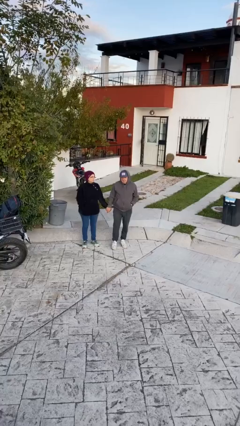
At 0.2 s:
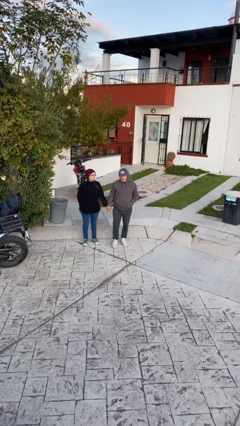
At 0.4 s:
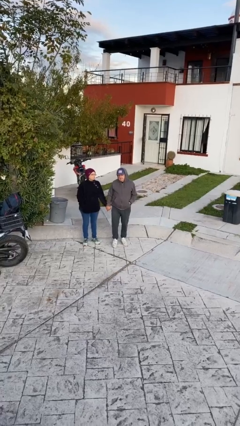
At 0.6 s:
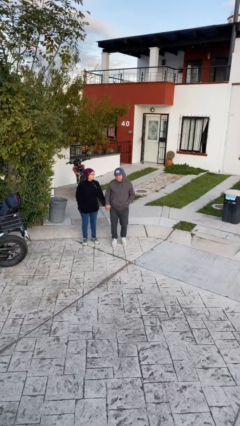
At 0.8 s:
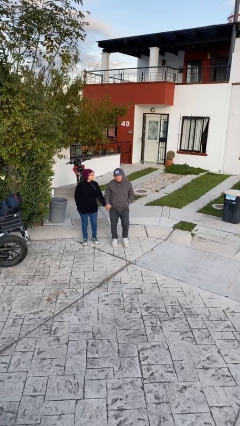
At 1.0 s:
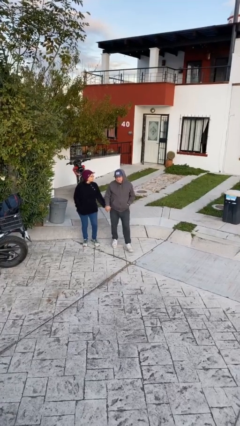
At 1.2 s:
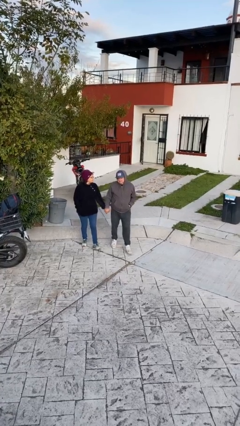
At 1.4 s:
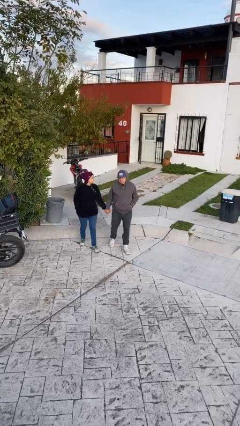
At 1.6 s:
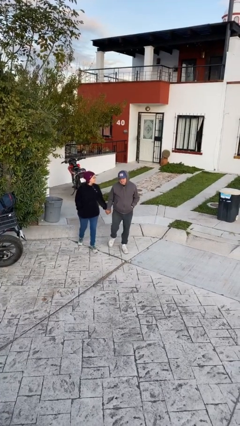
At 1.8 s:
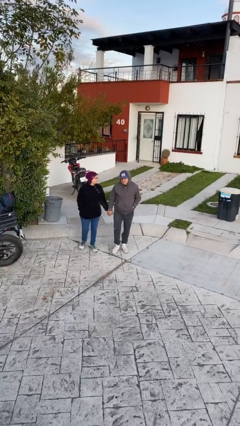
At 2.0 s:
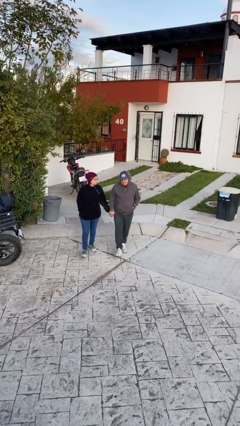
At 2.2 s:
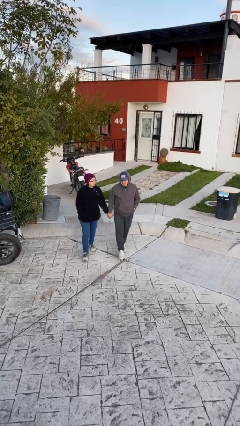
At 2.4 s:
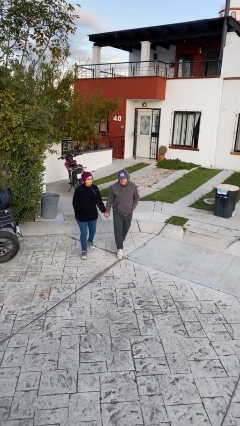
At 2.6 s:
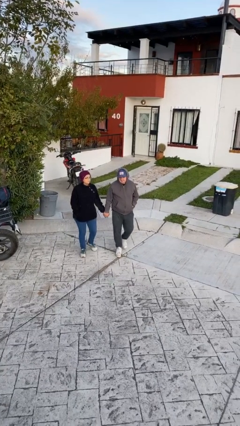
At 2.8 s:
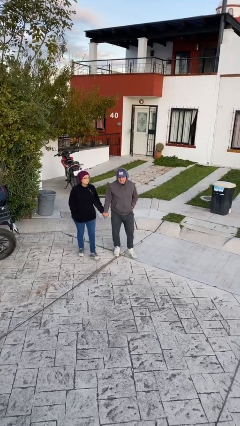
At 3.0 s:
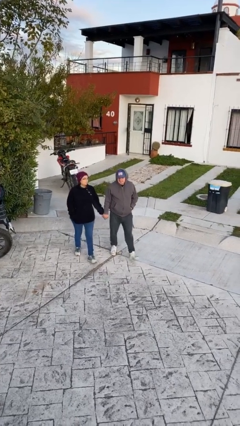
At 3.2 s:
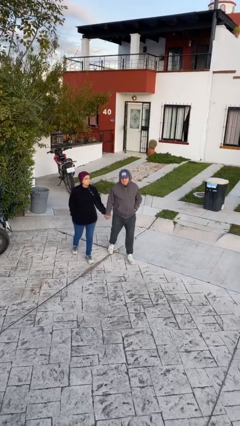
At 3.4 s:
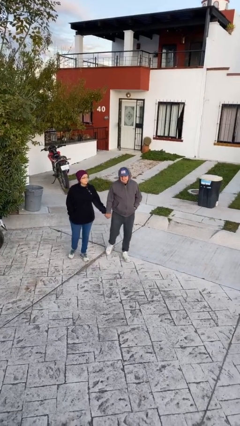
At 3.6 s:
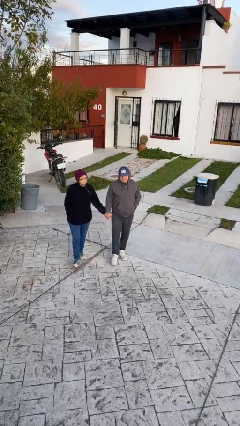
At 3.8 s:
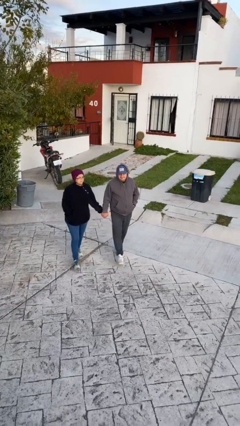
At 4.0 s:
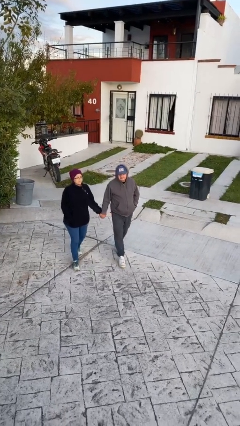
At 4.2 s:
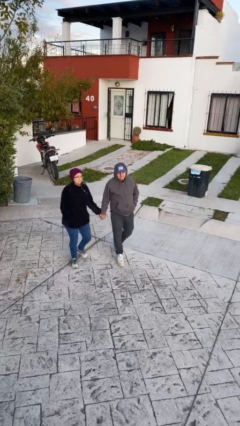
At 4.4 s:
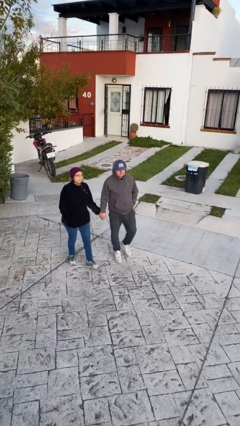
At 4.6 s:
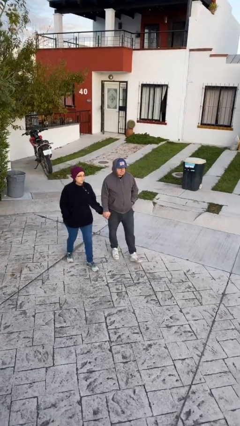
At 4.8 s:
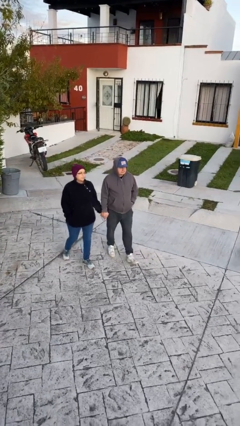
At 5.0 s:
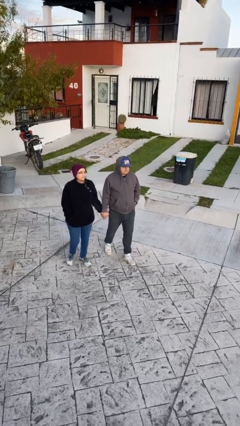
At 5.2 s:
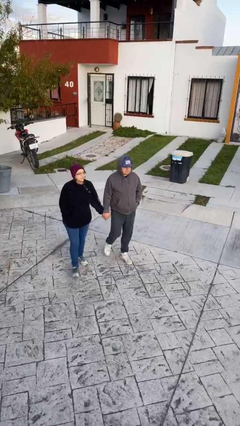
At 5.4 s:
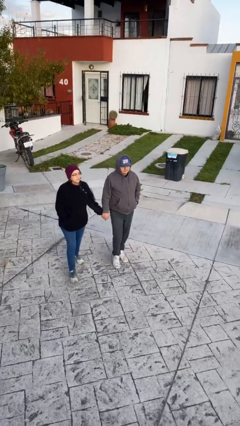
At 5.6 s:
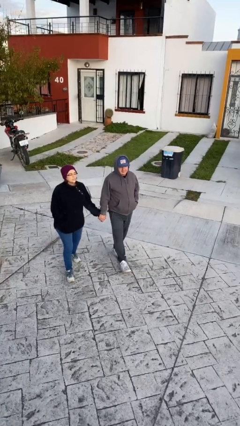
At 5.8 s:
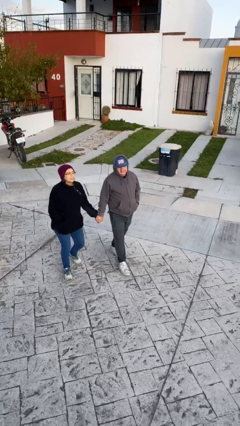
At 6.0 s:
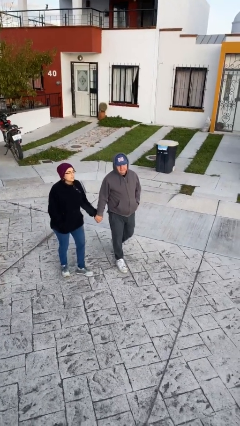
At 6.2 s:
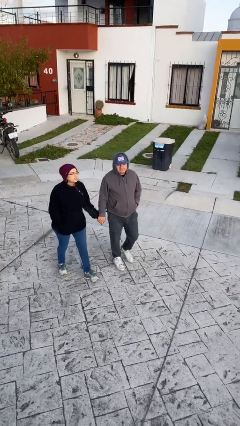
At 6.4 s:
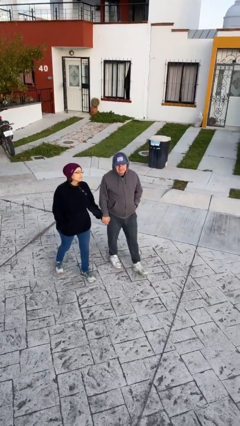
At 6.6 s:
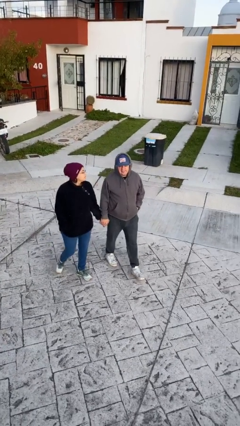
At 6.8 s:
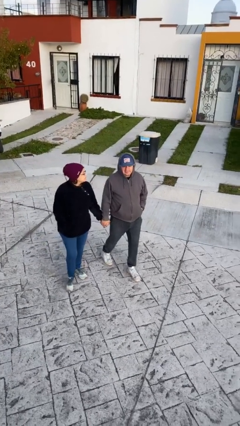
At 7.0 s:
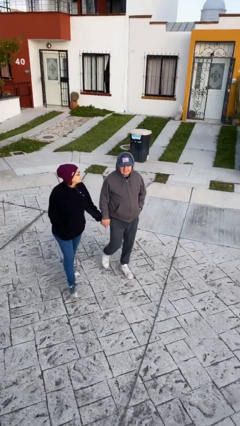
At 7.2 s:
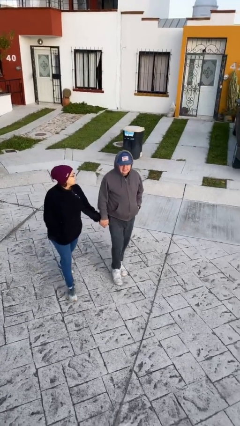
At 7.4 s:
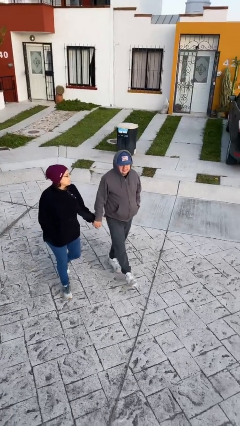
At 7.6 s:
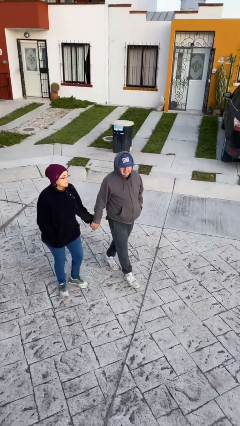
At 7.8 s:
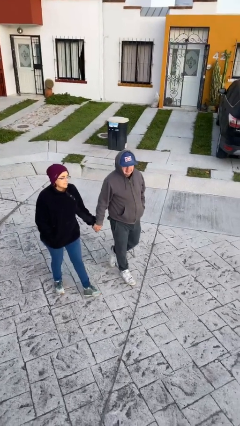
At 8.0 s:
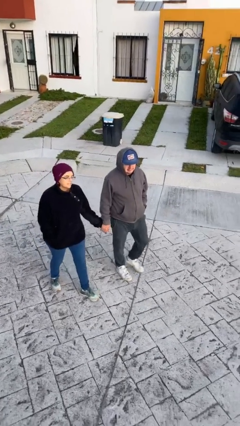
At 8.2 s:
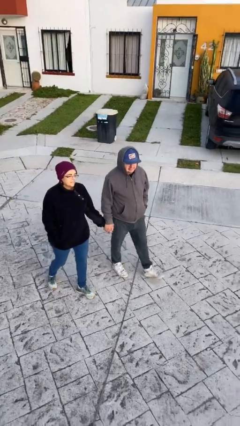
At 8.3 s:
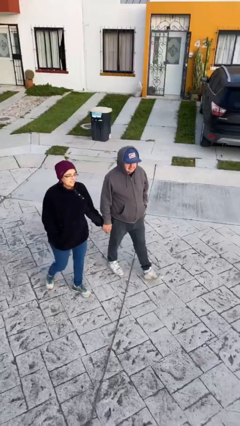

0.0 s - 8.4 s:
person holds hand

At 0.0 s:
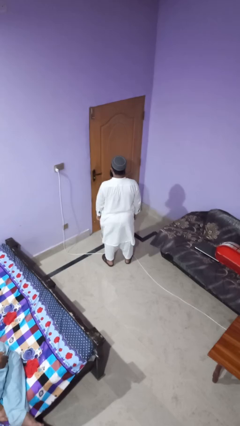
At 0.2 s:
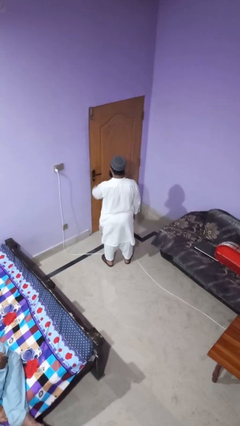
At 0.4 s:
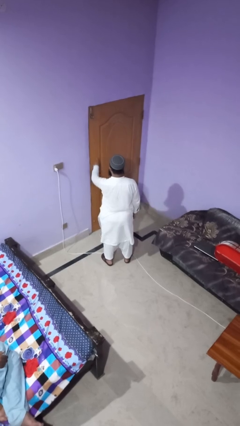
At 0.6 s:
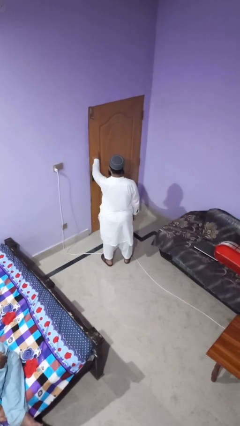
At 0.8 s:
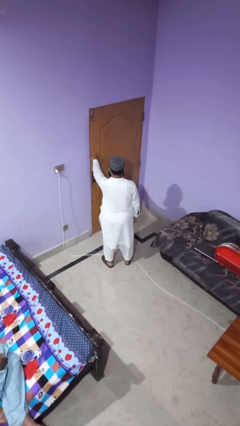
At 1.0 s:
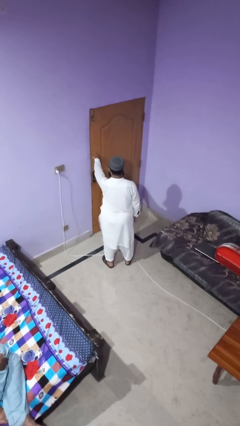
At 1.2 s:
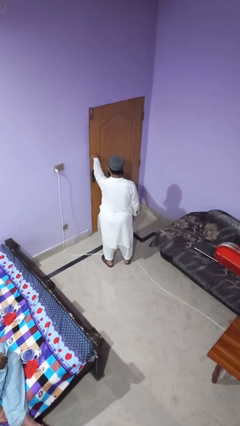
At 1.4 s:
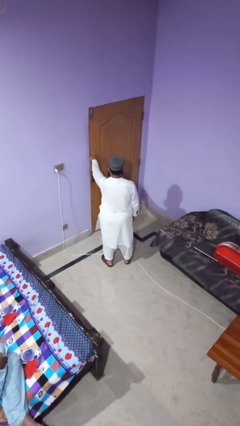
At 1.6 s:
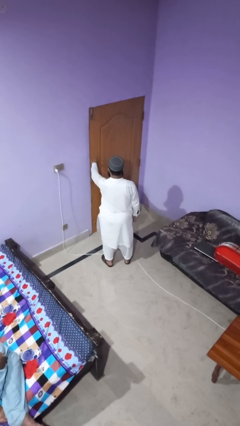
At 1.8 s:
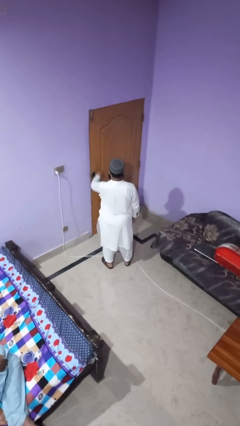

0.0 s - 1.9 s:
person taps object with finger

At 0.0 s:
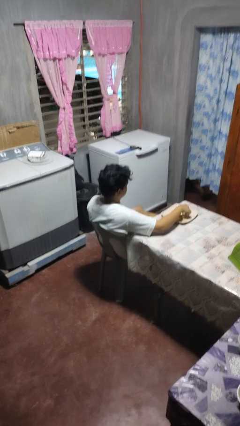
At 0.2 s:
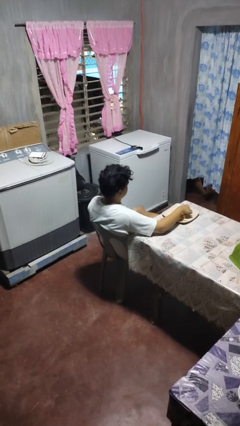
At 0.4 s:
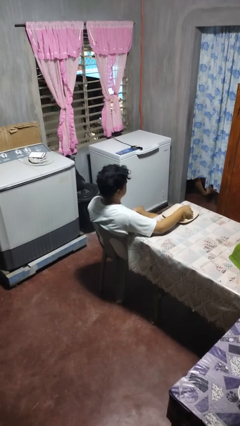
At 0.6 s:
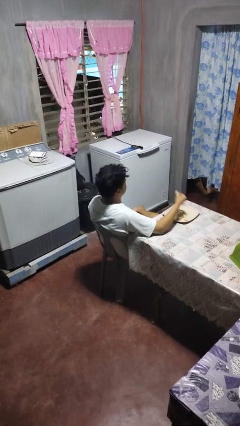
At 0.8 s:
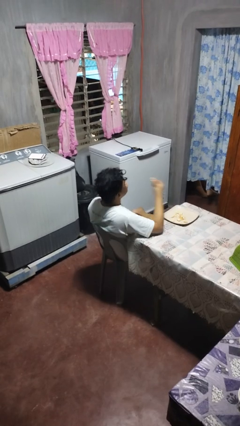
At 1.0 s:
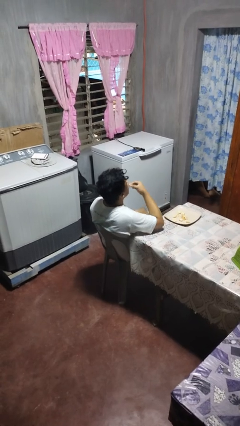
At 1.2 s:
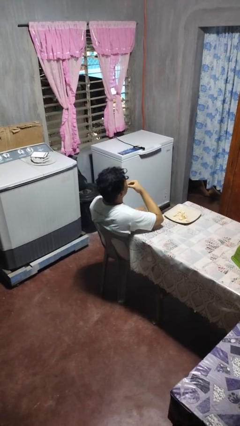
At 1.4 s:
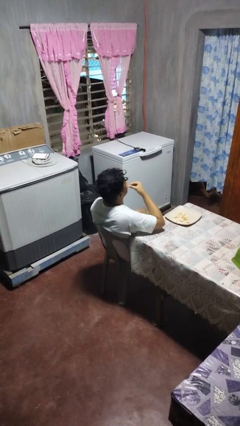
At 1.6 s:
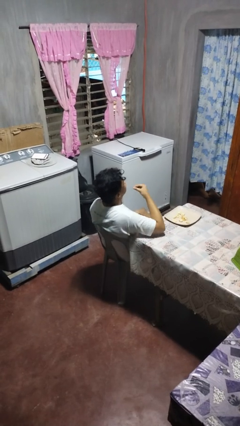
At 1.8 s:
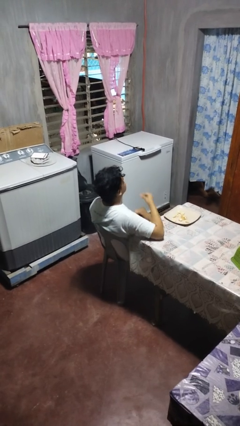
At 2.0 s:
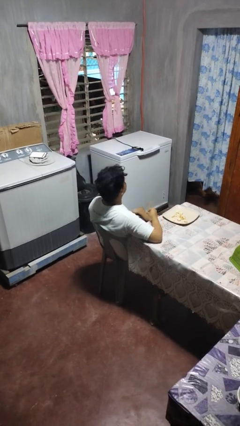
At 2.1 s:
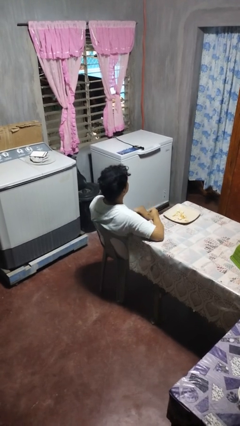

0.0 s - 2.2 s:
person eats with hands

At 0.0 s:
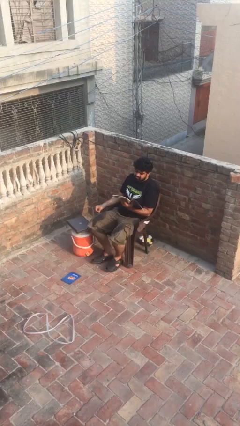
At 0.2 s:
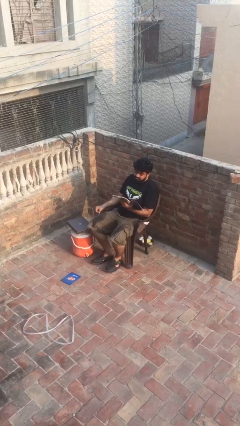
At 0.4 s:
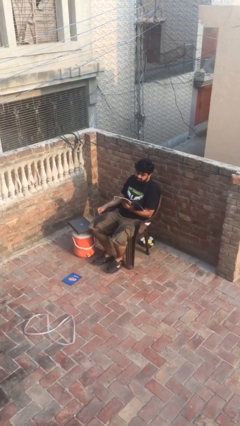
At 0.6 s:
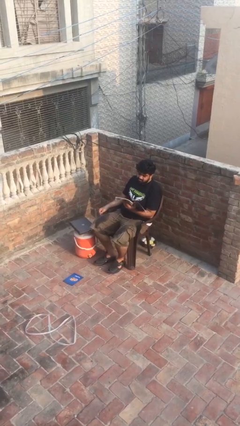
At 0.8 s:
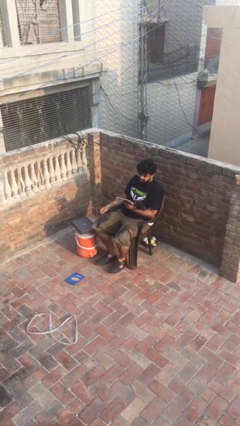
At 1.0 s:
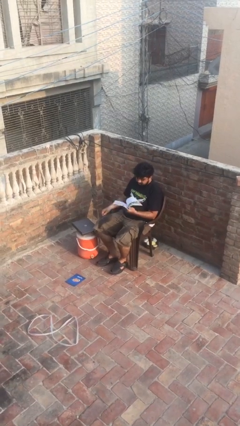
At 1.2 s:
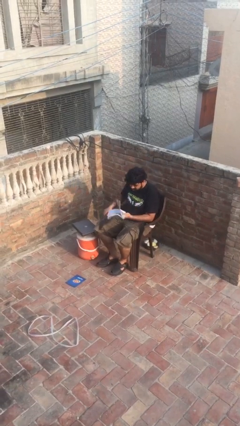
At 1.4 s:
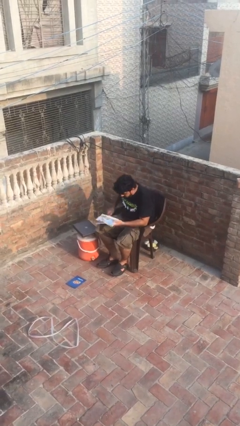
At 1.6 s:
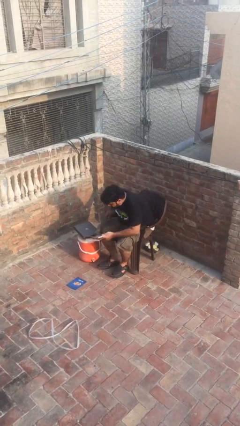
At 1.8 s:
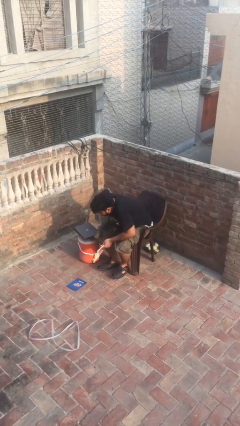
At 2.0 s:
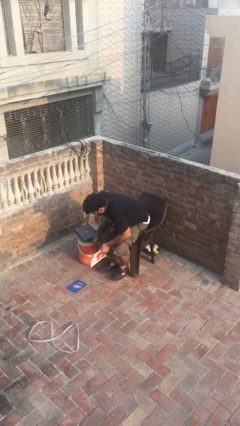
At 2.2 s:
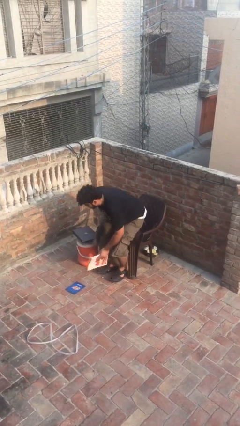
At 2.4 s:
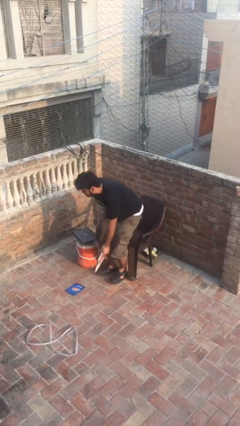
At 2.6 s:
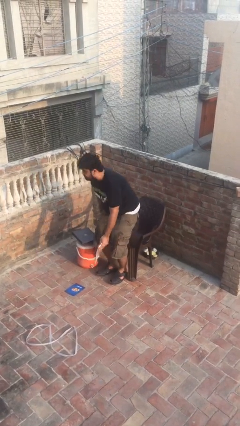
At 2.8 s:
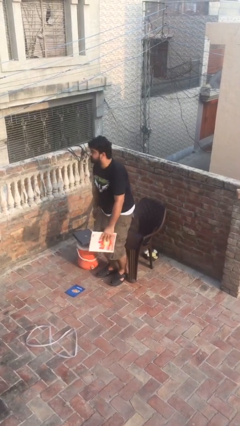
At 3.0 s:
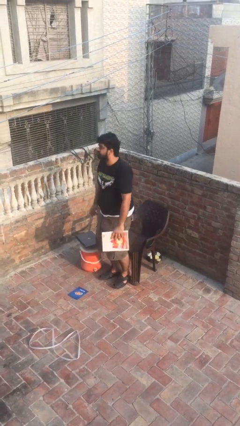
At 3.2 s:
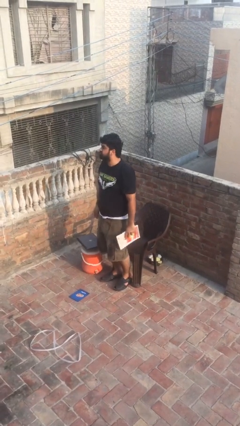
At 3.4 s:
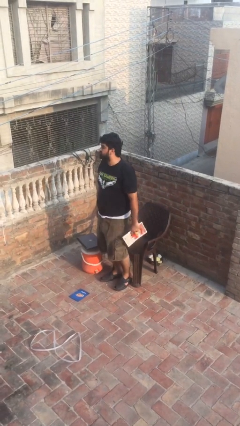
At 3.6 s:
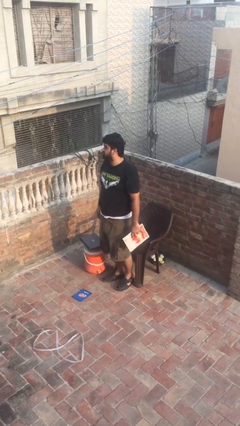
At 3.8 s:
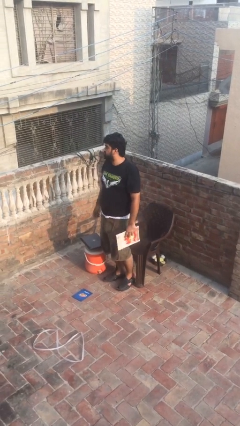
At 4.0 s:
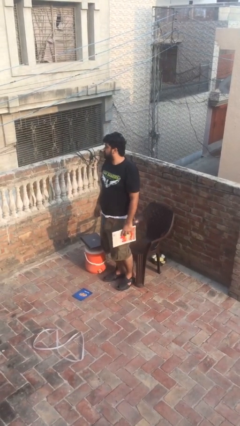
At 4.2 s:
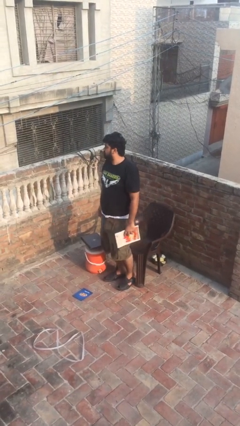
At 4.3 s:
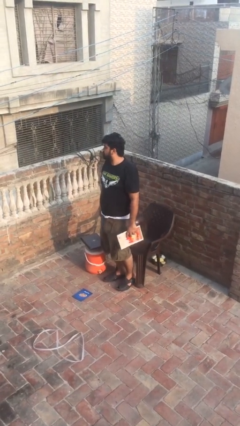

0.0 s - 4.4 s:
person stands up

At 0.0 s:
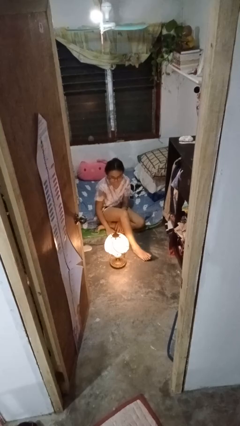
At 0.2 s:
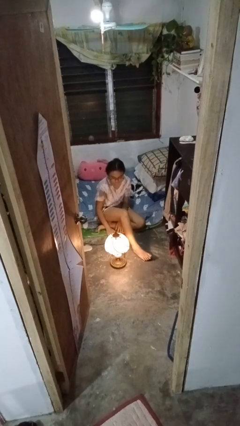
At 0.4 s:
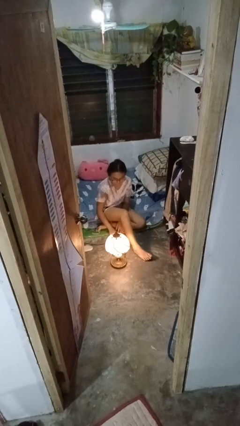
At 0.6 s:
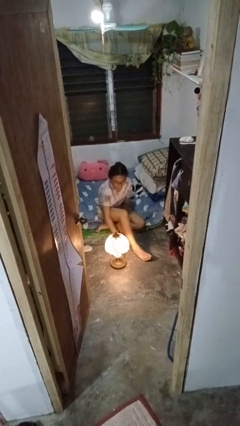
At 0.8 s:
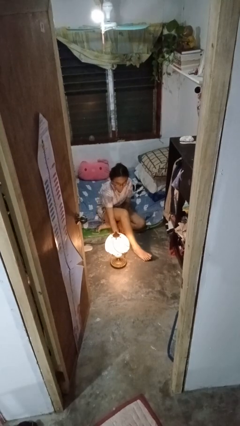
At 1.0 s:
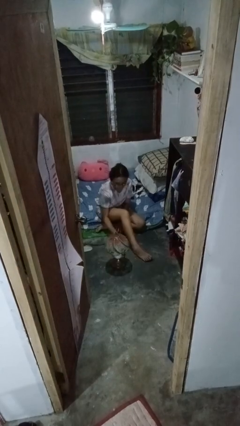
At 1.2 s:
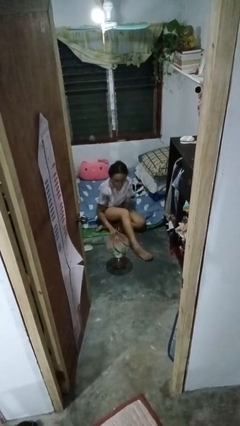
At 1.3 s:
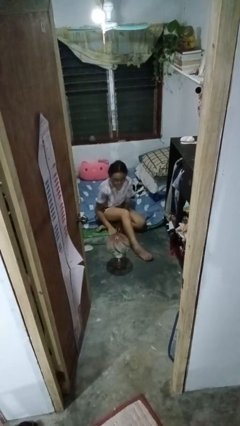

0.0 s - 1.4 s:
person turns off lamp
